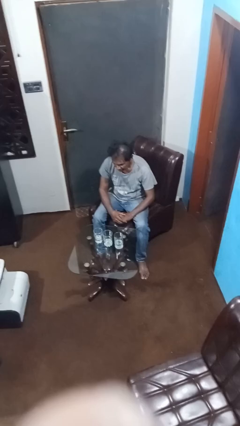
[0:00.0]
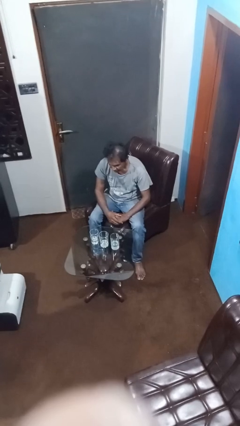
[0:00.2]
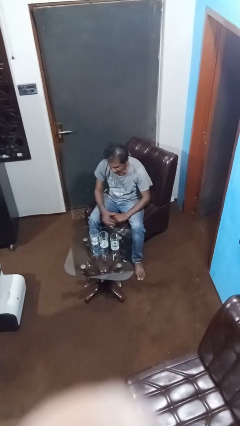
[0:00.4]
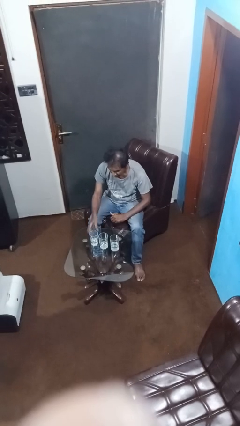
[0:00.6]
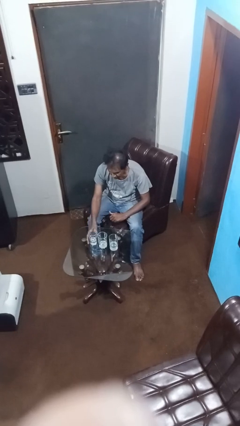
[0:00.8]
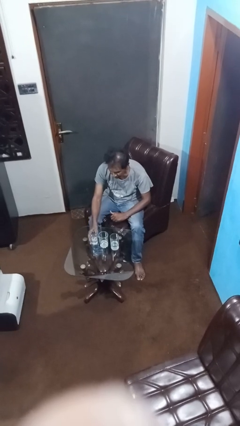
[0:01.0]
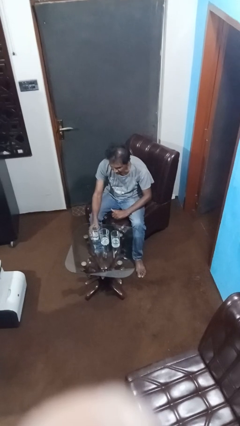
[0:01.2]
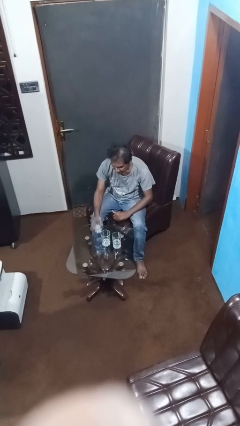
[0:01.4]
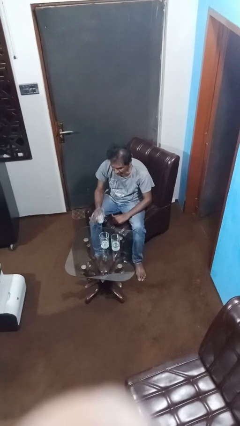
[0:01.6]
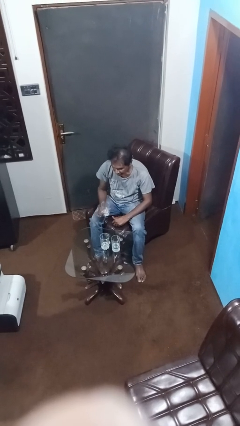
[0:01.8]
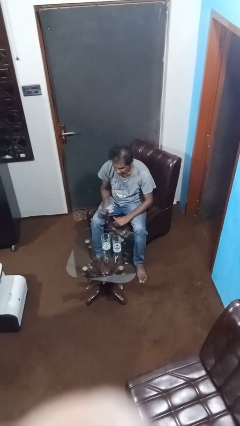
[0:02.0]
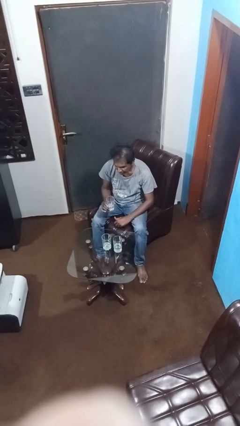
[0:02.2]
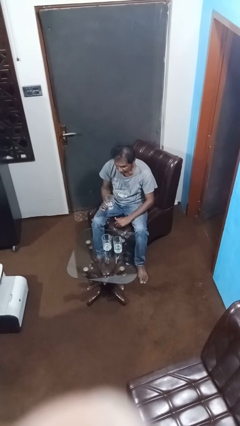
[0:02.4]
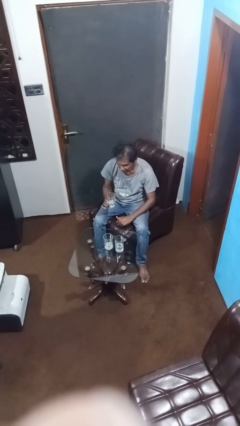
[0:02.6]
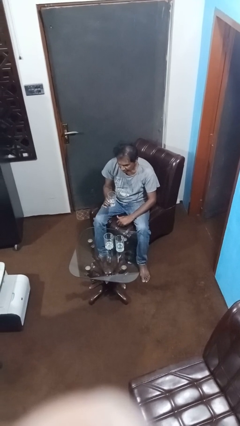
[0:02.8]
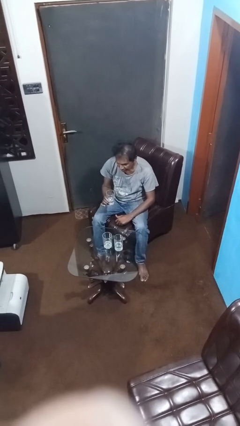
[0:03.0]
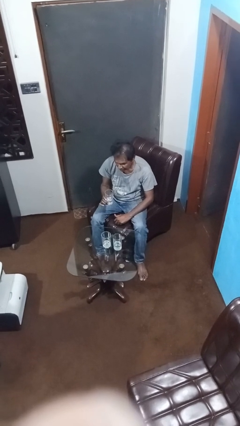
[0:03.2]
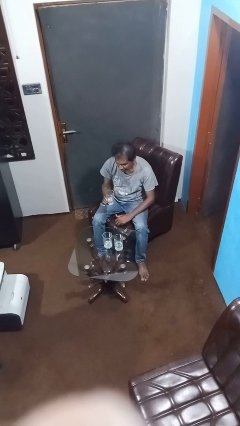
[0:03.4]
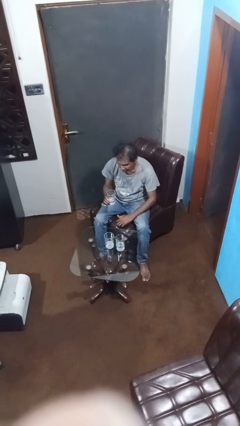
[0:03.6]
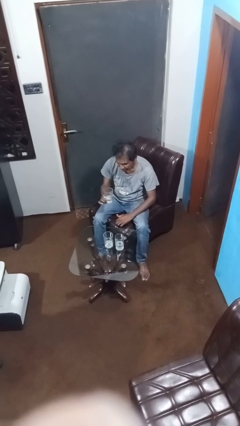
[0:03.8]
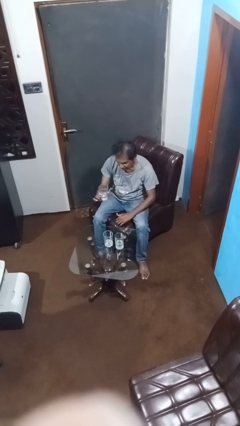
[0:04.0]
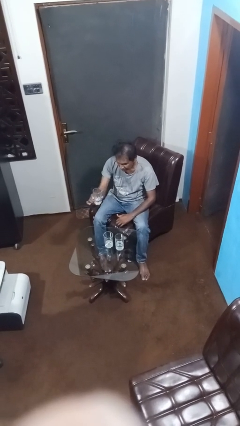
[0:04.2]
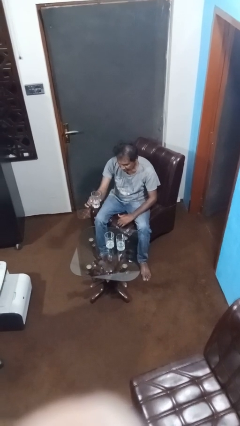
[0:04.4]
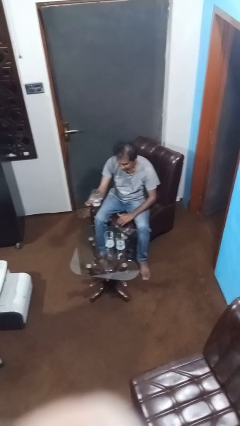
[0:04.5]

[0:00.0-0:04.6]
person picks up object from table

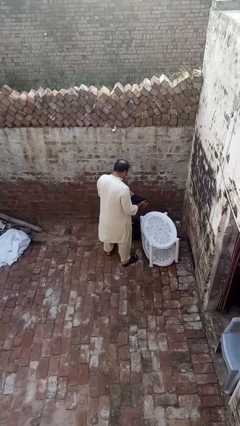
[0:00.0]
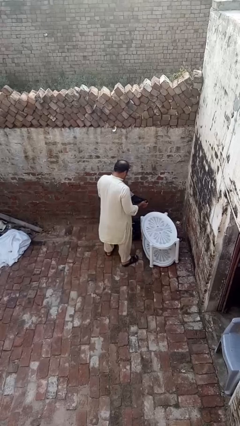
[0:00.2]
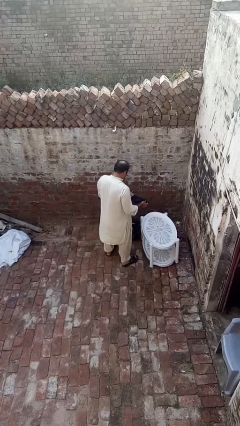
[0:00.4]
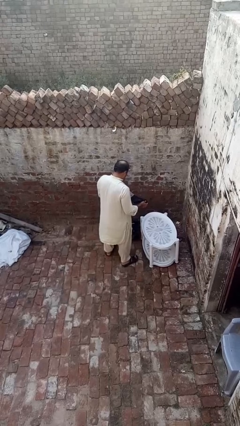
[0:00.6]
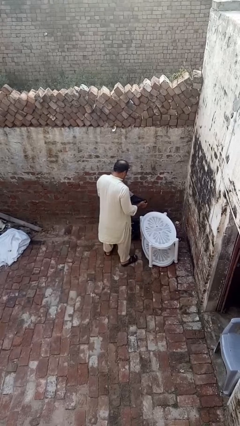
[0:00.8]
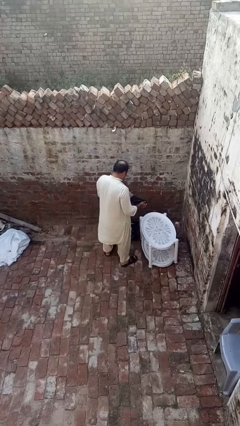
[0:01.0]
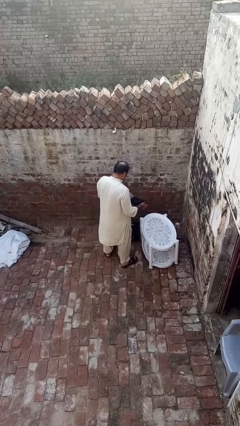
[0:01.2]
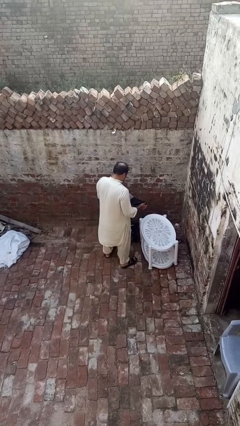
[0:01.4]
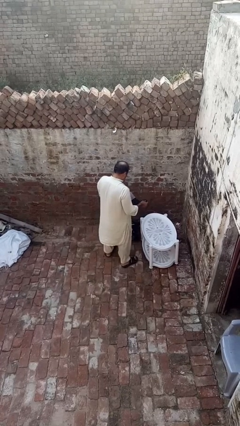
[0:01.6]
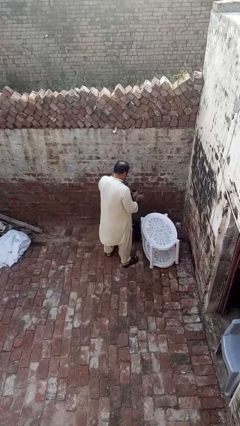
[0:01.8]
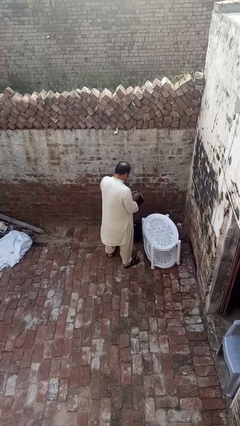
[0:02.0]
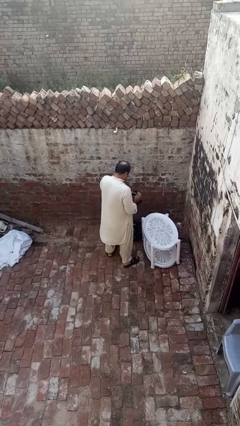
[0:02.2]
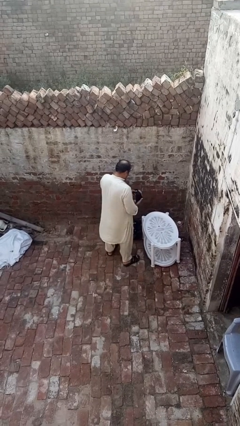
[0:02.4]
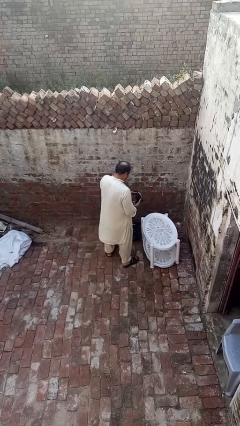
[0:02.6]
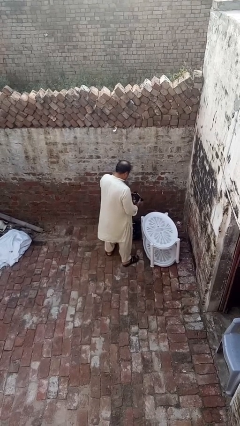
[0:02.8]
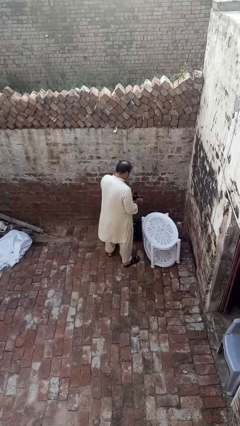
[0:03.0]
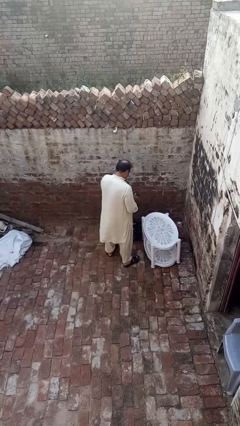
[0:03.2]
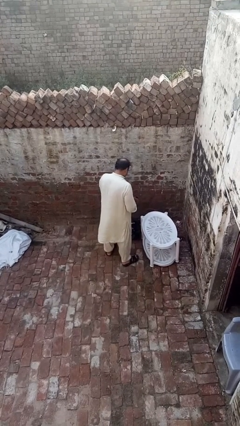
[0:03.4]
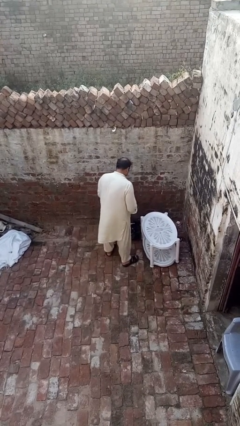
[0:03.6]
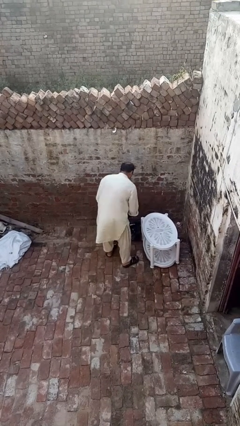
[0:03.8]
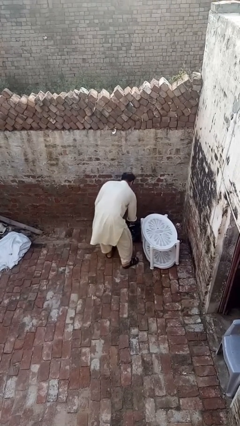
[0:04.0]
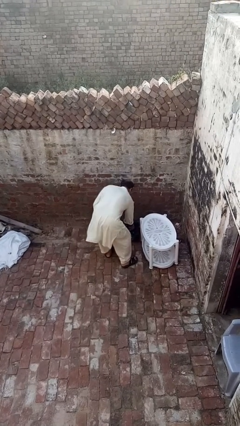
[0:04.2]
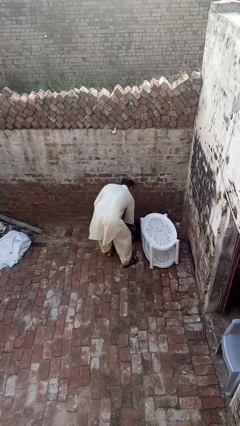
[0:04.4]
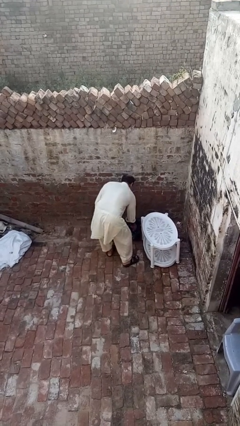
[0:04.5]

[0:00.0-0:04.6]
person folds socks

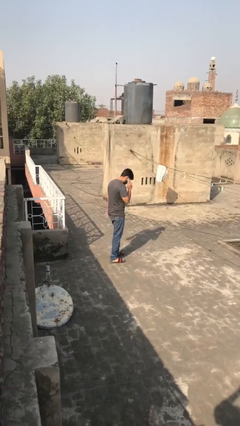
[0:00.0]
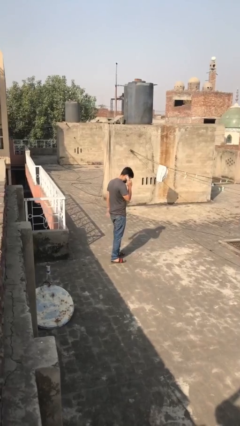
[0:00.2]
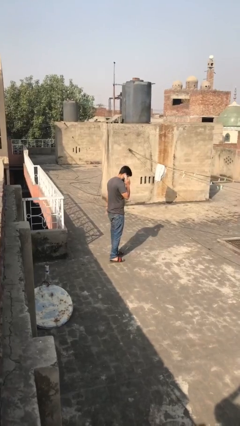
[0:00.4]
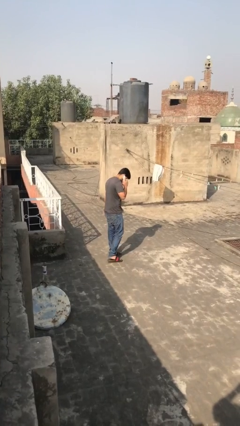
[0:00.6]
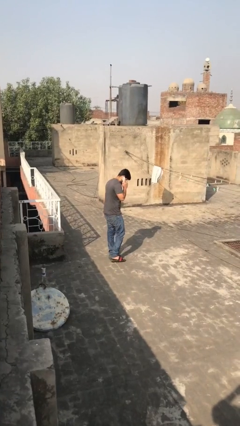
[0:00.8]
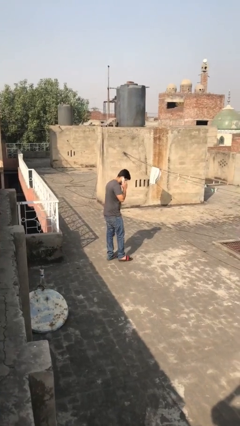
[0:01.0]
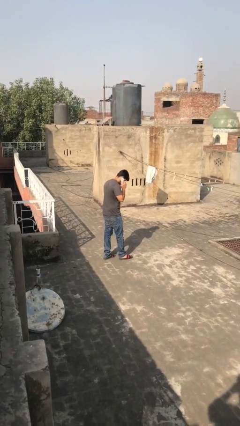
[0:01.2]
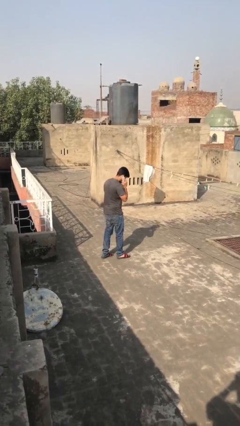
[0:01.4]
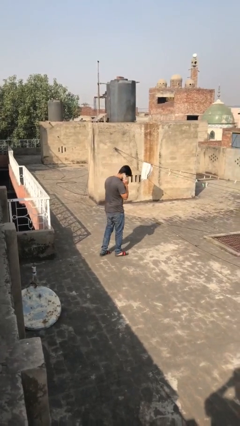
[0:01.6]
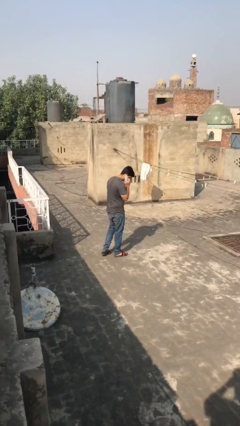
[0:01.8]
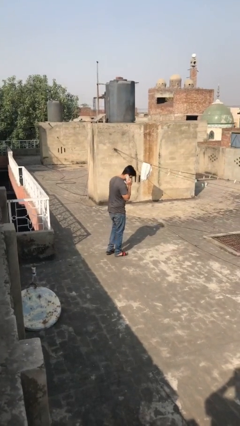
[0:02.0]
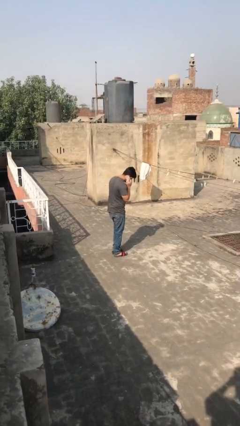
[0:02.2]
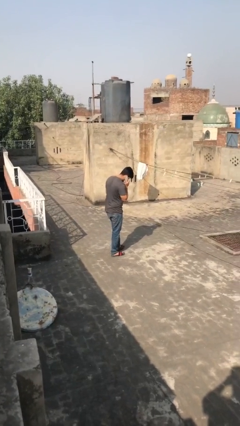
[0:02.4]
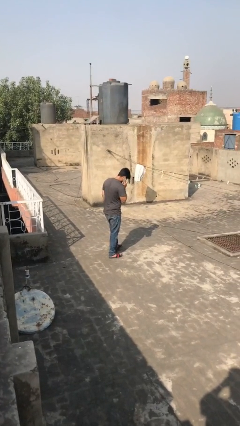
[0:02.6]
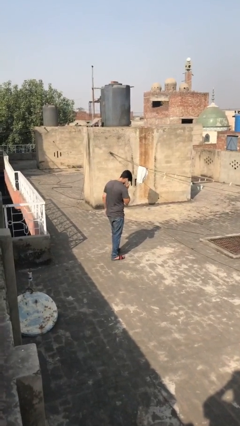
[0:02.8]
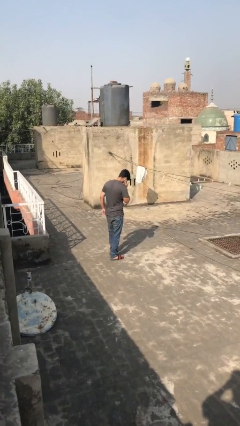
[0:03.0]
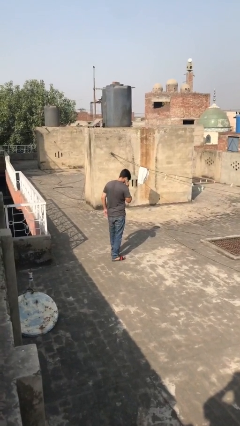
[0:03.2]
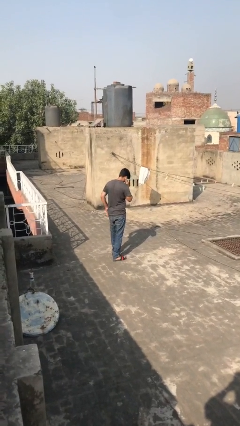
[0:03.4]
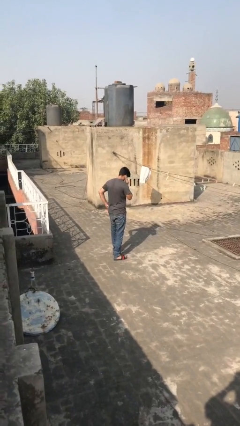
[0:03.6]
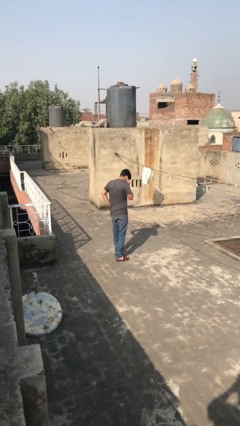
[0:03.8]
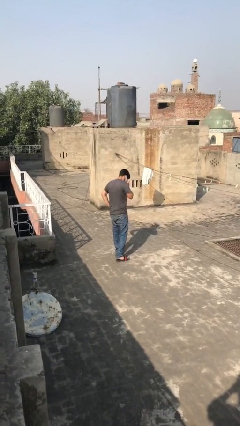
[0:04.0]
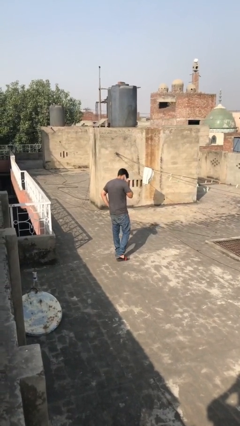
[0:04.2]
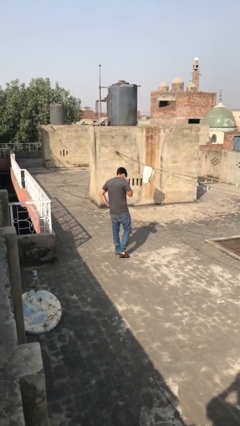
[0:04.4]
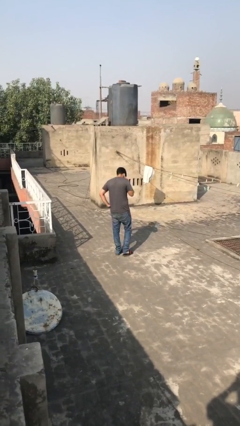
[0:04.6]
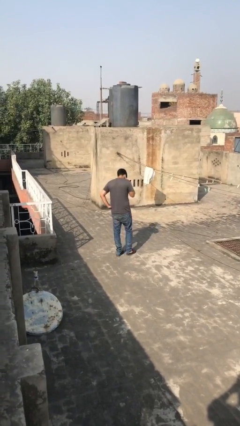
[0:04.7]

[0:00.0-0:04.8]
person talks on phone

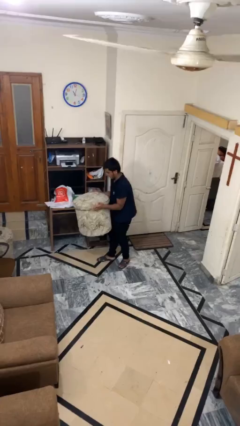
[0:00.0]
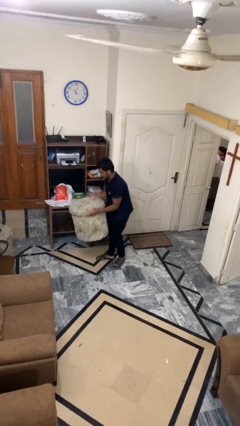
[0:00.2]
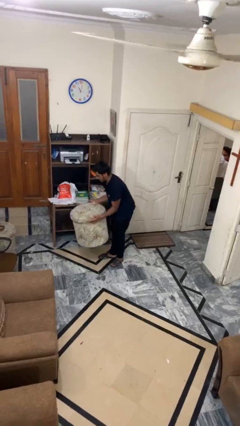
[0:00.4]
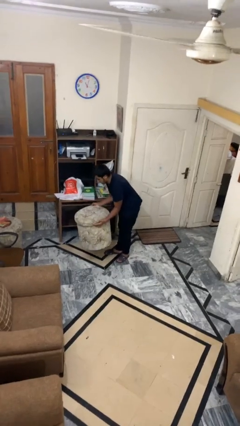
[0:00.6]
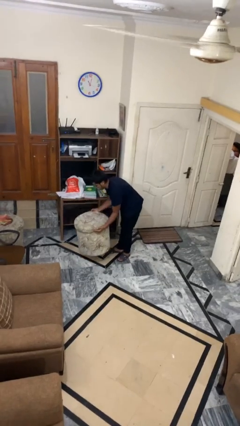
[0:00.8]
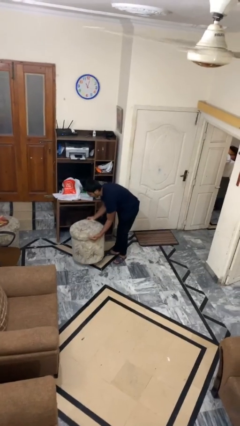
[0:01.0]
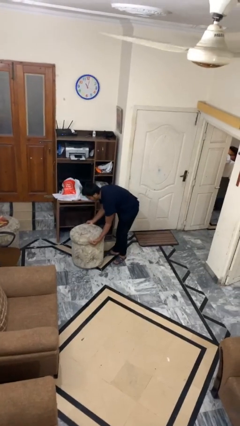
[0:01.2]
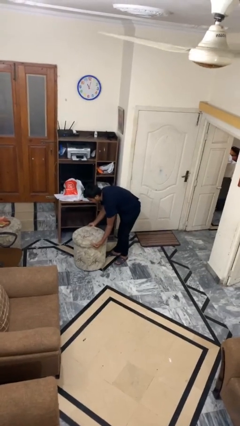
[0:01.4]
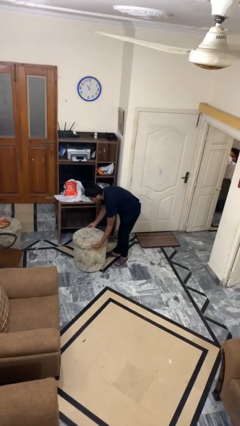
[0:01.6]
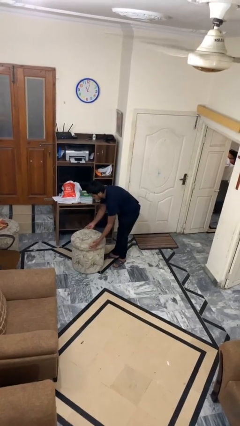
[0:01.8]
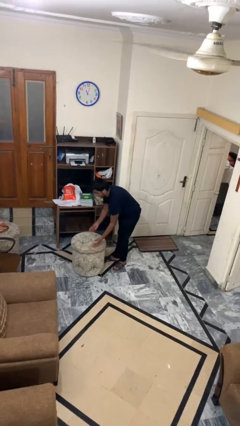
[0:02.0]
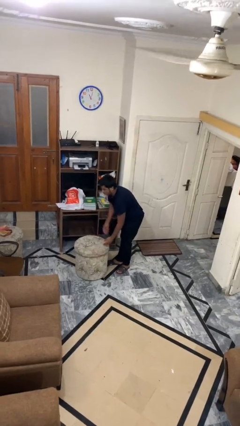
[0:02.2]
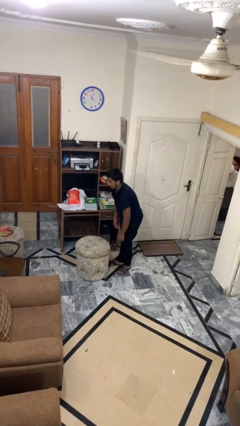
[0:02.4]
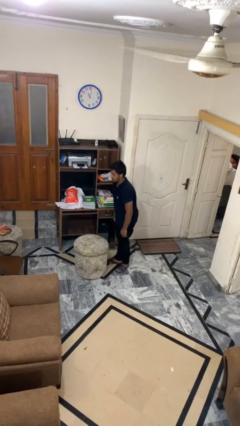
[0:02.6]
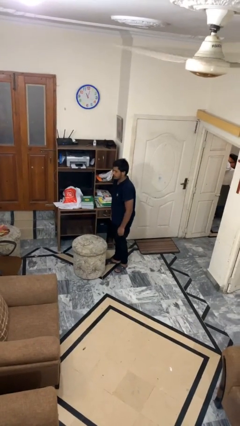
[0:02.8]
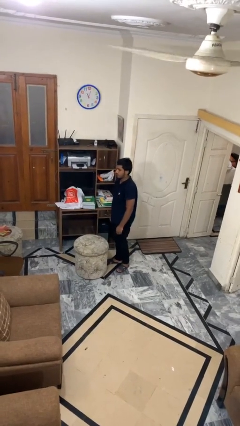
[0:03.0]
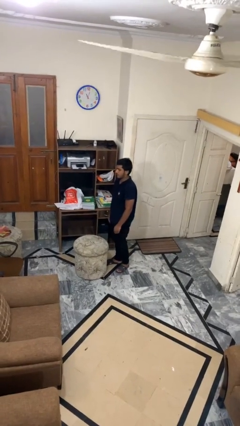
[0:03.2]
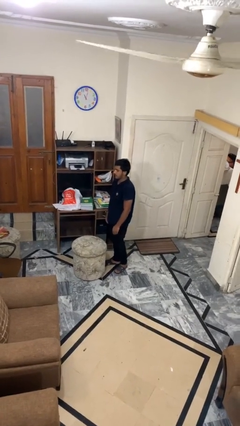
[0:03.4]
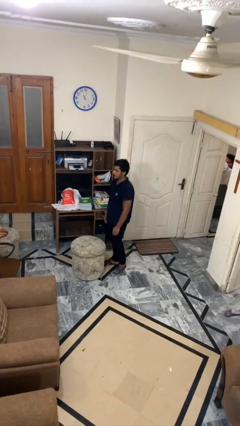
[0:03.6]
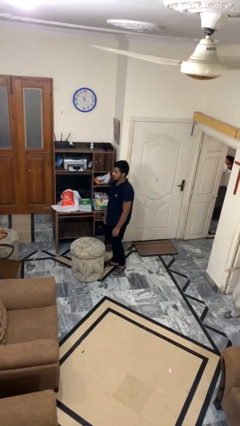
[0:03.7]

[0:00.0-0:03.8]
person puts down object on floor
